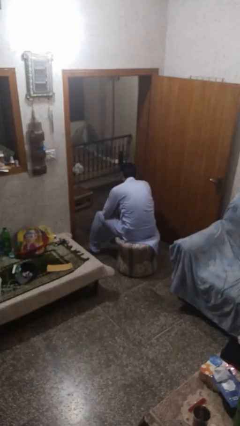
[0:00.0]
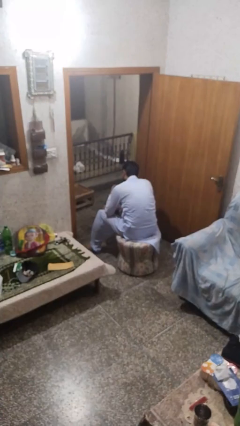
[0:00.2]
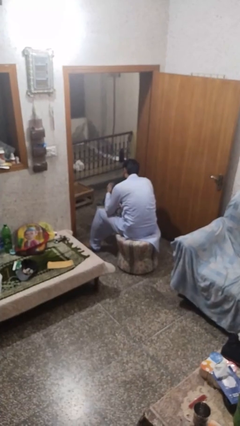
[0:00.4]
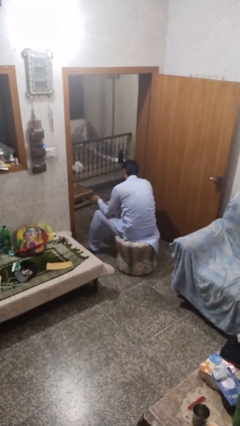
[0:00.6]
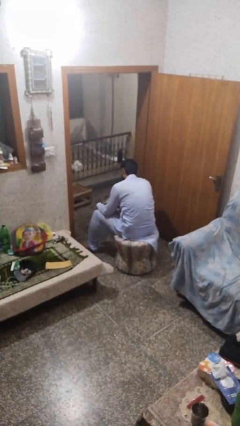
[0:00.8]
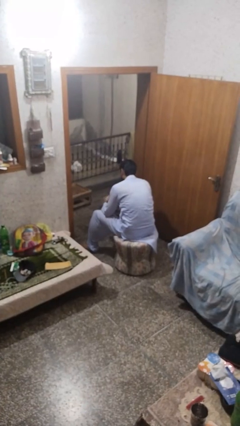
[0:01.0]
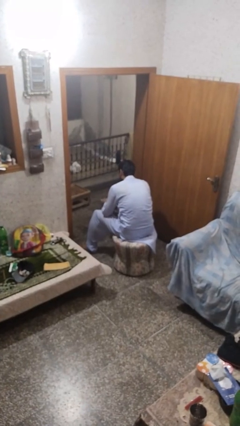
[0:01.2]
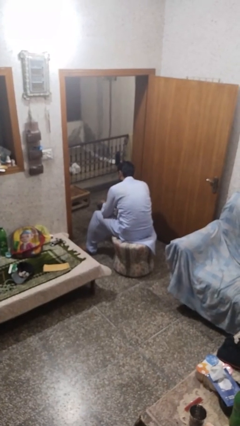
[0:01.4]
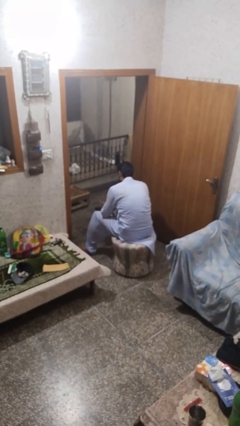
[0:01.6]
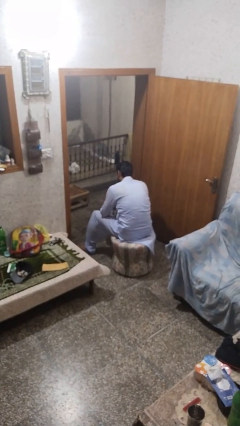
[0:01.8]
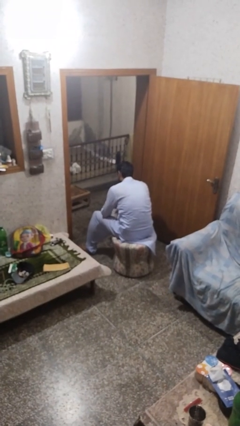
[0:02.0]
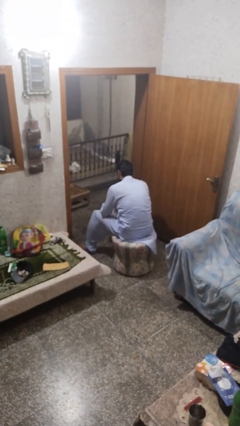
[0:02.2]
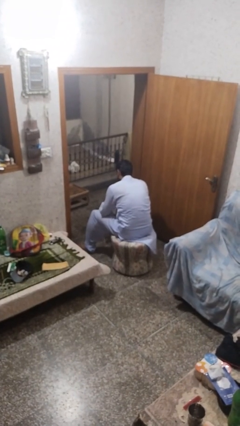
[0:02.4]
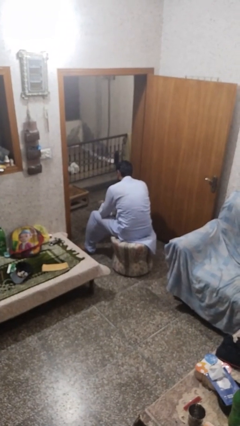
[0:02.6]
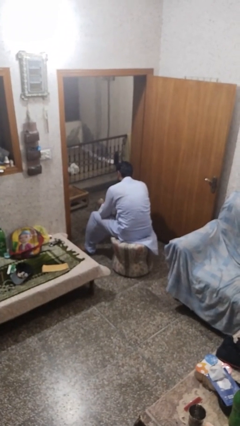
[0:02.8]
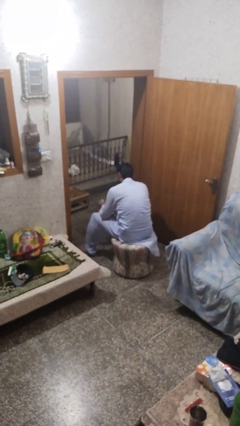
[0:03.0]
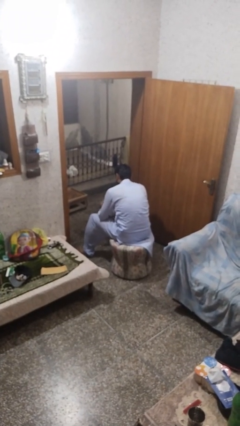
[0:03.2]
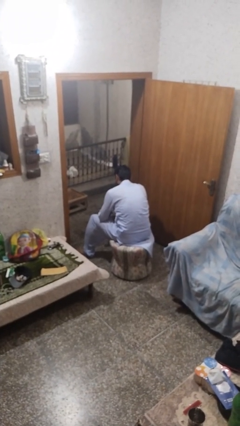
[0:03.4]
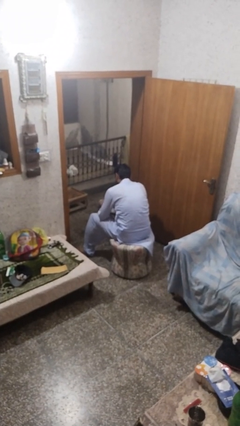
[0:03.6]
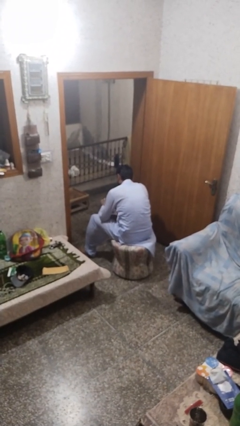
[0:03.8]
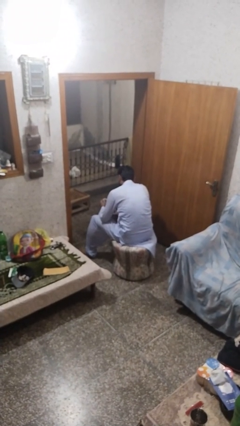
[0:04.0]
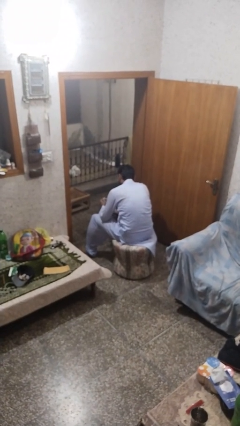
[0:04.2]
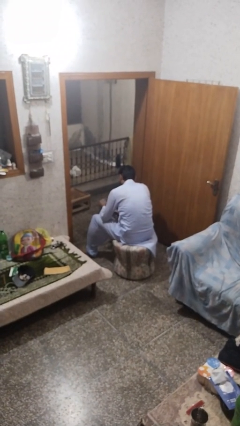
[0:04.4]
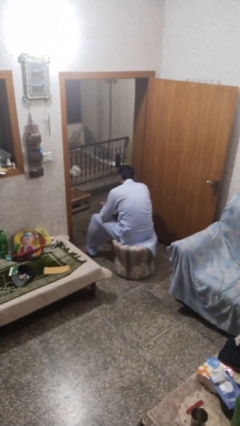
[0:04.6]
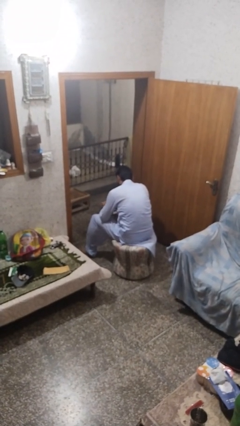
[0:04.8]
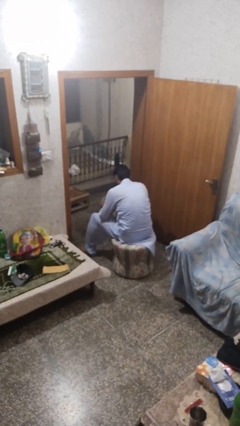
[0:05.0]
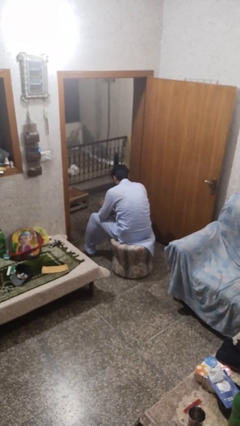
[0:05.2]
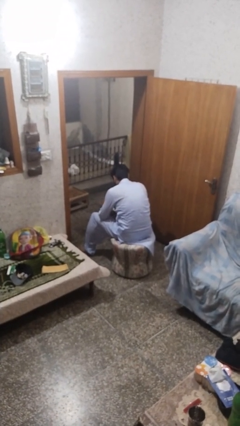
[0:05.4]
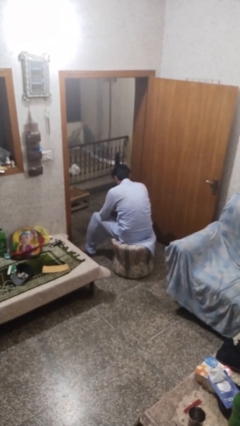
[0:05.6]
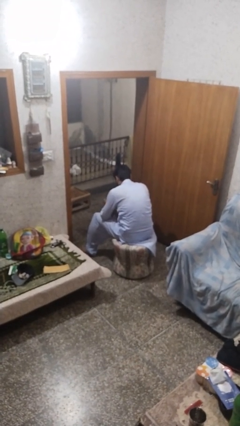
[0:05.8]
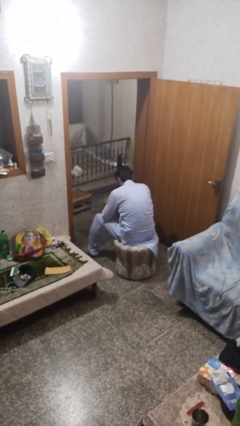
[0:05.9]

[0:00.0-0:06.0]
person searches in purse

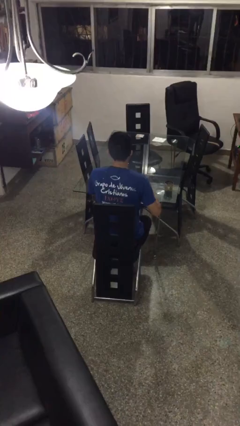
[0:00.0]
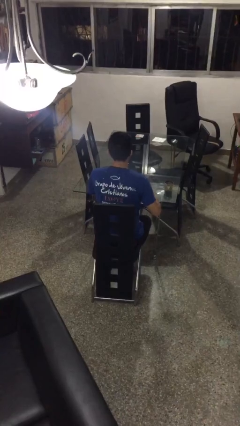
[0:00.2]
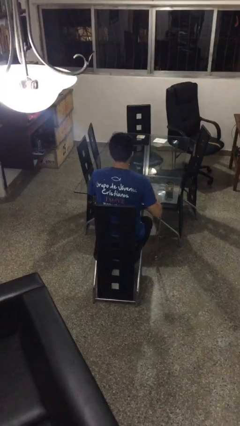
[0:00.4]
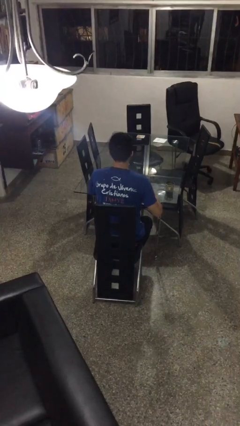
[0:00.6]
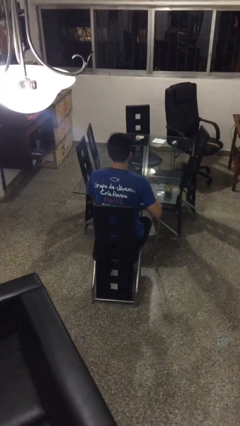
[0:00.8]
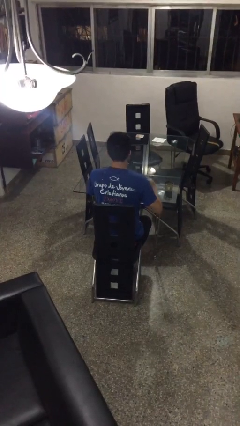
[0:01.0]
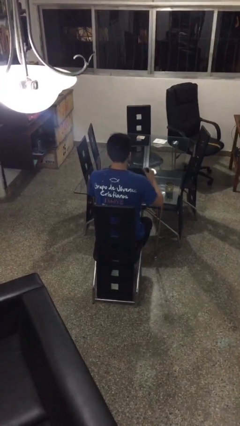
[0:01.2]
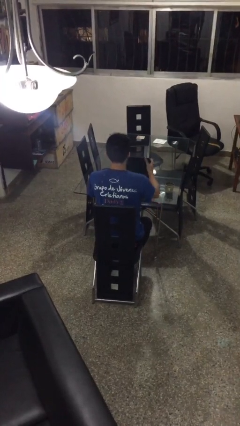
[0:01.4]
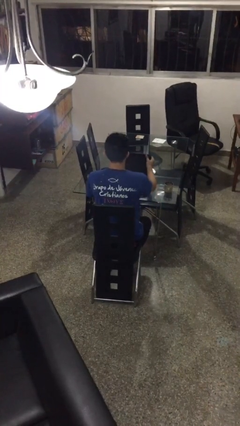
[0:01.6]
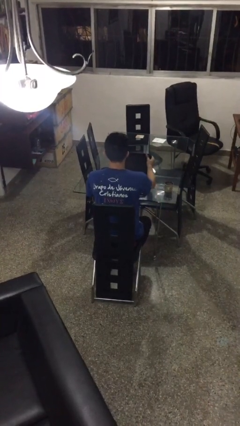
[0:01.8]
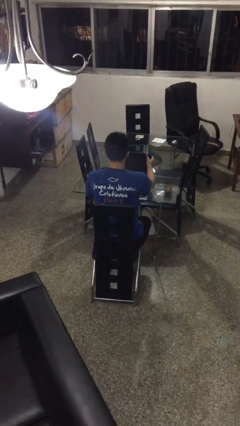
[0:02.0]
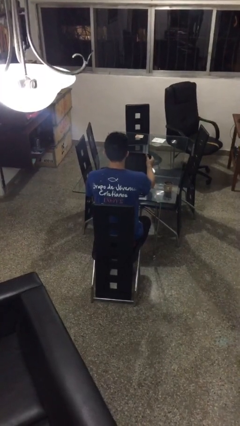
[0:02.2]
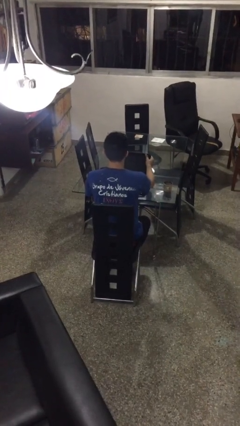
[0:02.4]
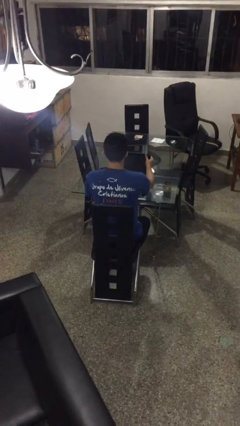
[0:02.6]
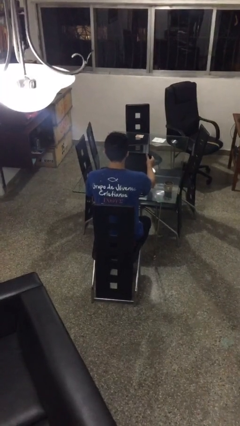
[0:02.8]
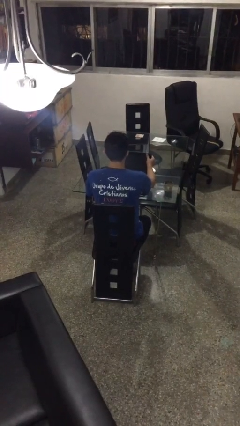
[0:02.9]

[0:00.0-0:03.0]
person opens laptop

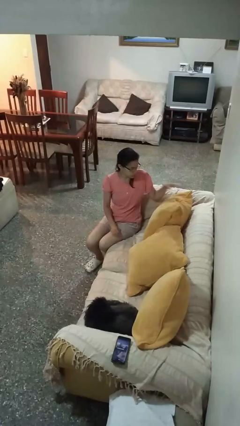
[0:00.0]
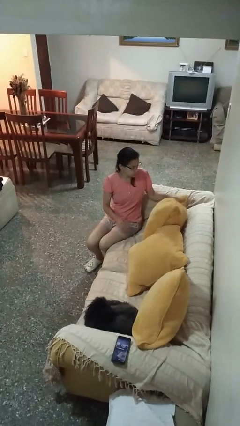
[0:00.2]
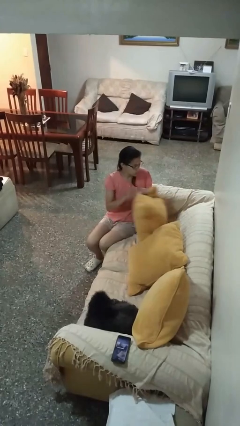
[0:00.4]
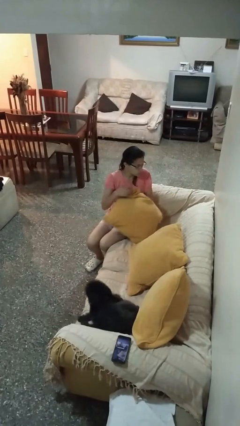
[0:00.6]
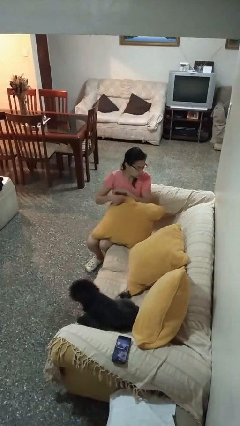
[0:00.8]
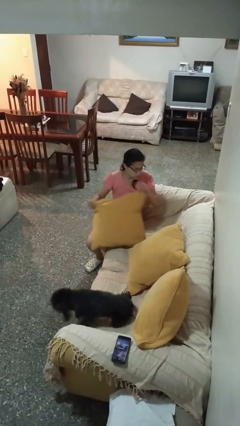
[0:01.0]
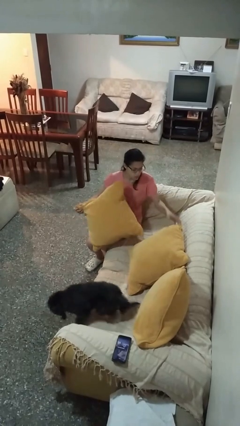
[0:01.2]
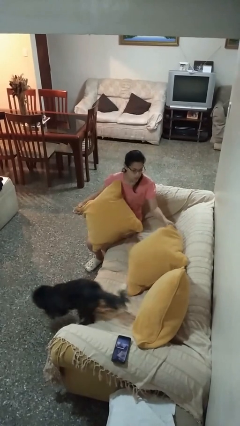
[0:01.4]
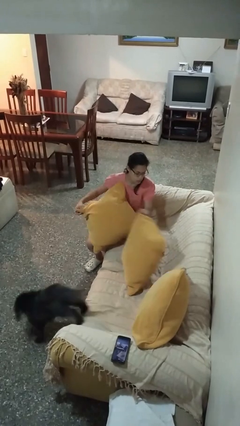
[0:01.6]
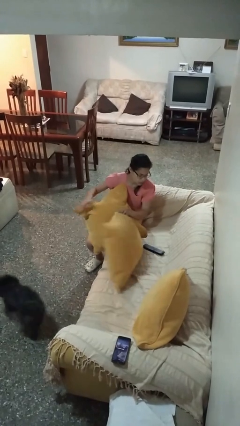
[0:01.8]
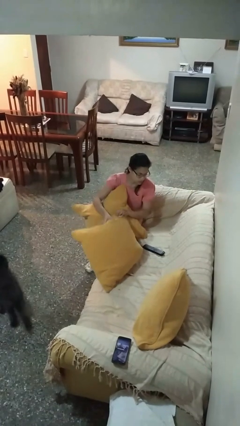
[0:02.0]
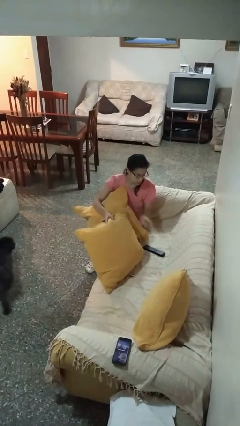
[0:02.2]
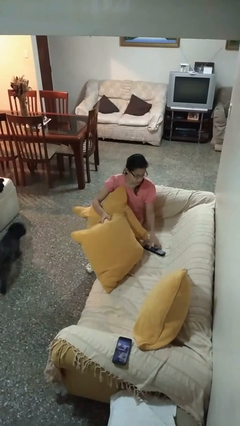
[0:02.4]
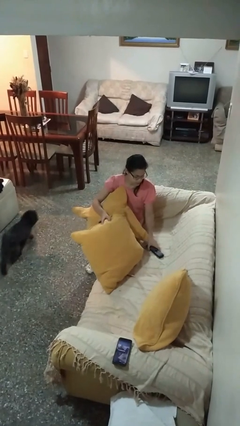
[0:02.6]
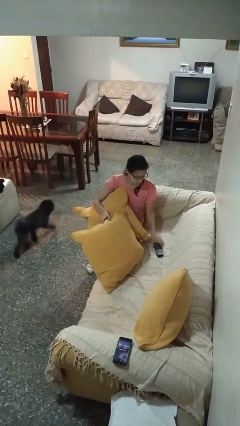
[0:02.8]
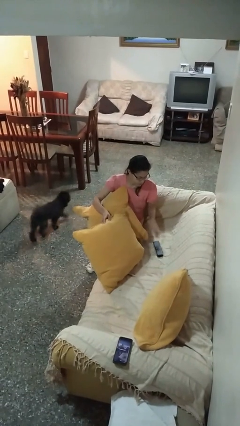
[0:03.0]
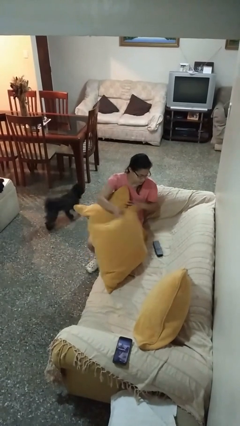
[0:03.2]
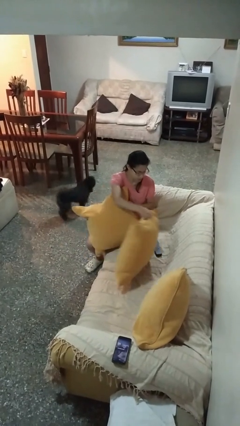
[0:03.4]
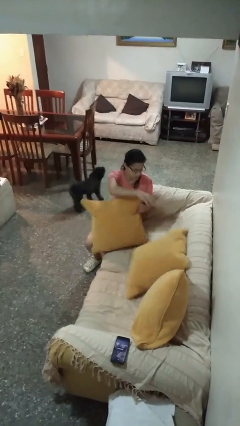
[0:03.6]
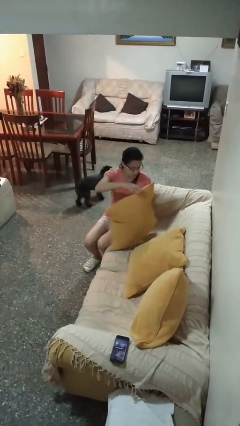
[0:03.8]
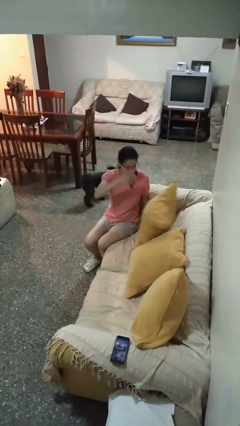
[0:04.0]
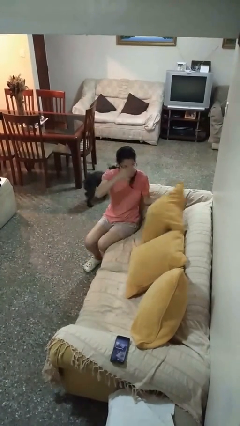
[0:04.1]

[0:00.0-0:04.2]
person searches in couch

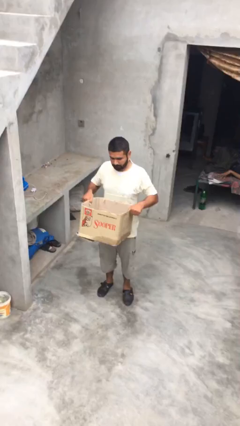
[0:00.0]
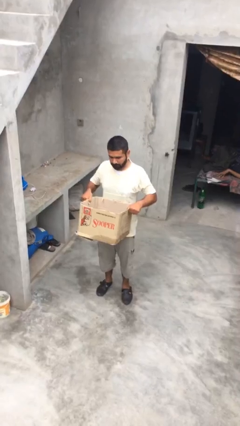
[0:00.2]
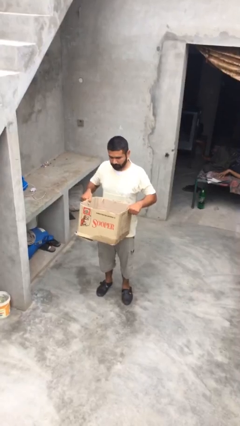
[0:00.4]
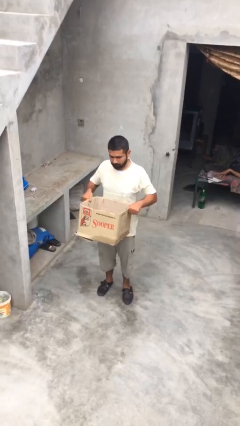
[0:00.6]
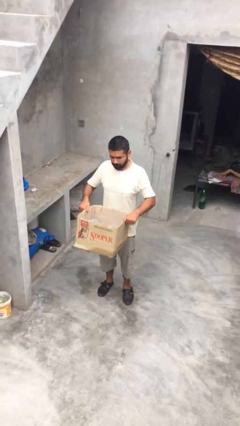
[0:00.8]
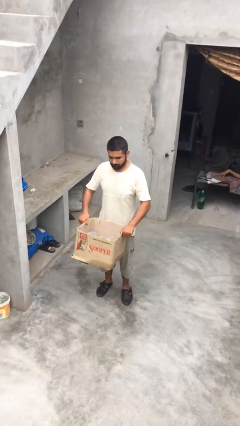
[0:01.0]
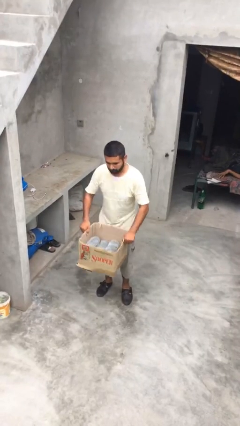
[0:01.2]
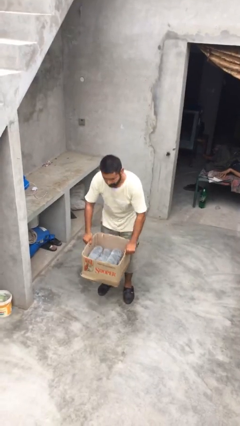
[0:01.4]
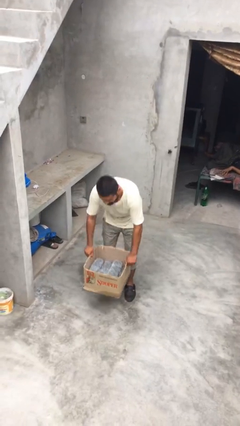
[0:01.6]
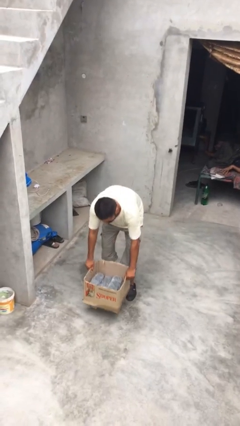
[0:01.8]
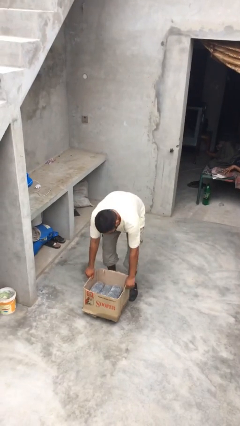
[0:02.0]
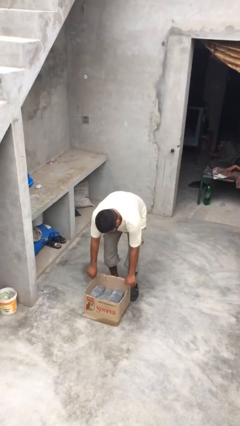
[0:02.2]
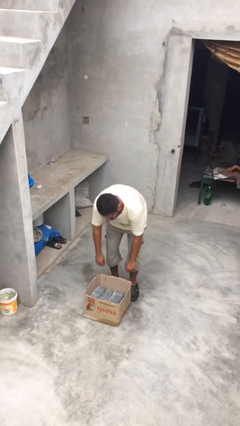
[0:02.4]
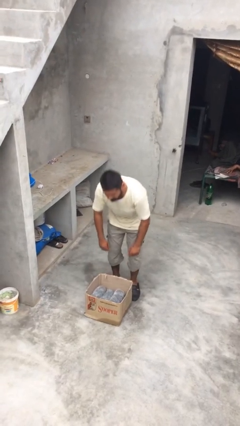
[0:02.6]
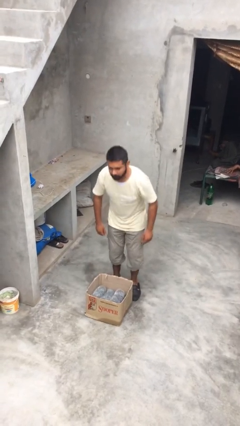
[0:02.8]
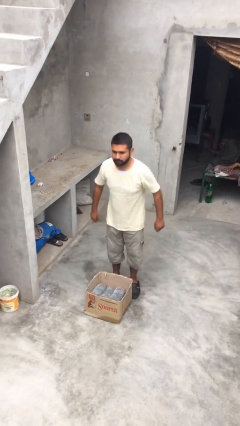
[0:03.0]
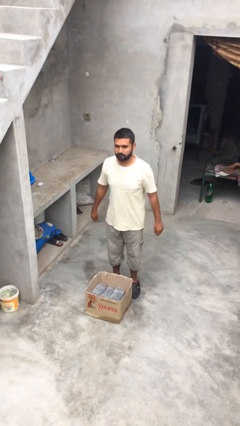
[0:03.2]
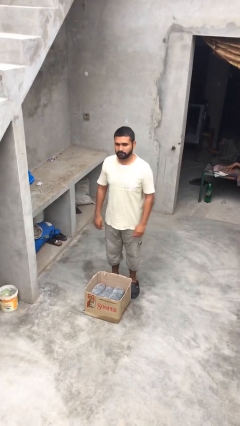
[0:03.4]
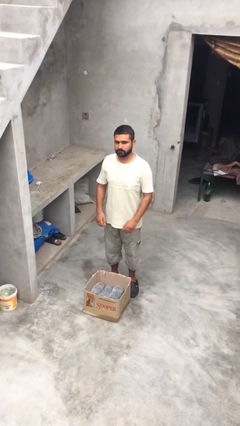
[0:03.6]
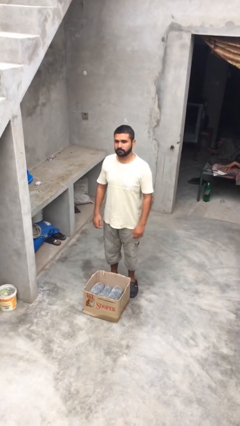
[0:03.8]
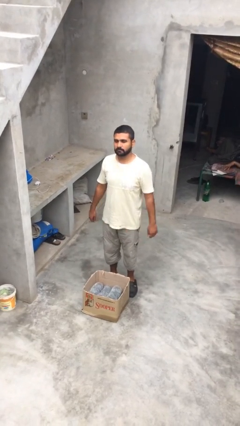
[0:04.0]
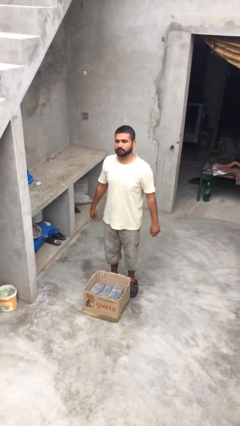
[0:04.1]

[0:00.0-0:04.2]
person puts down object on floor

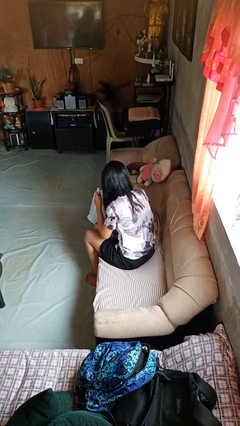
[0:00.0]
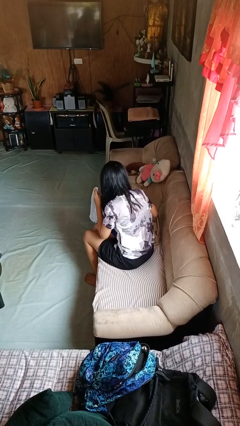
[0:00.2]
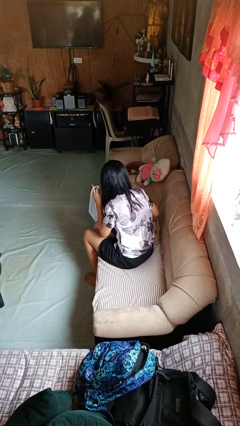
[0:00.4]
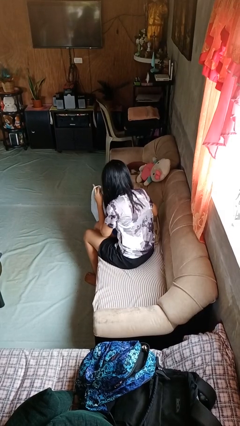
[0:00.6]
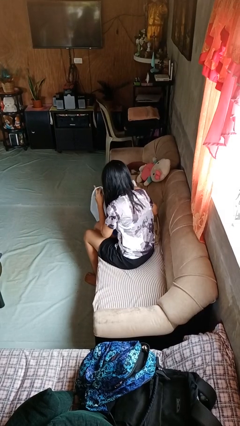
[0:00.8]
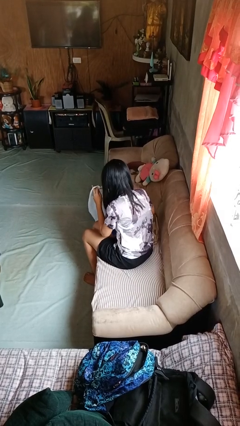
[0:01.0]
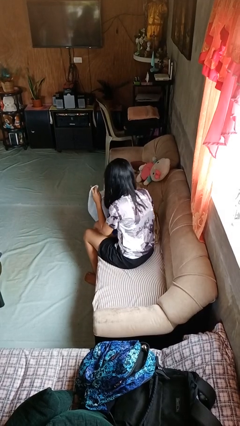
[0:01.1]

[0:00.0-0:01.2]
person searches in bag
